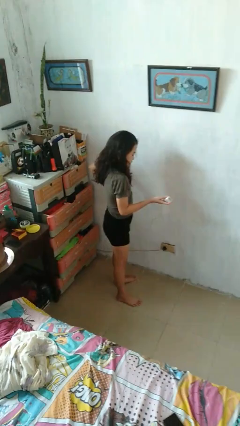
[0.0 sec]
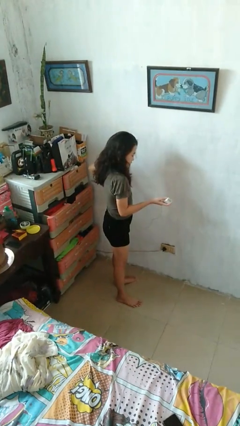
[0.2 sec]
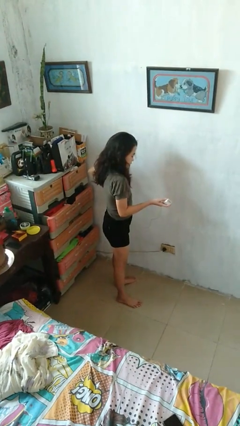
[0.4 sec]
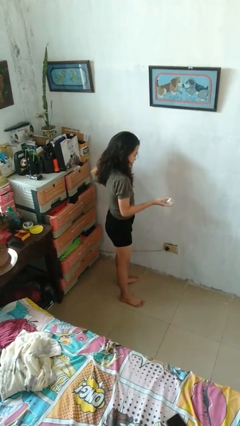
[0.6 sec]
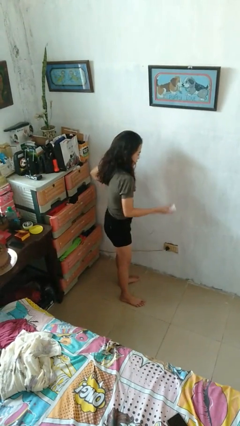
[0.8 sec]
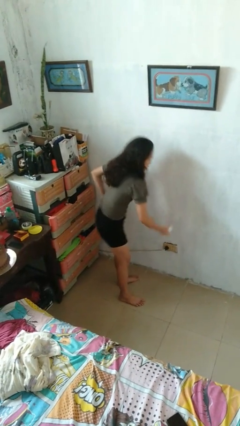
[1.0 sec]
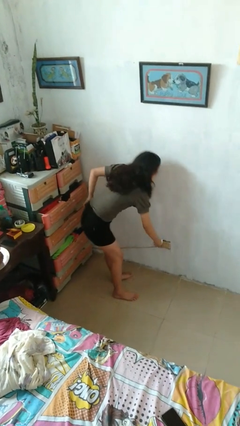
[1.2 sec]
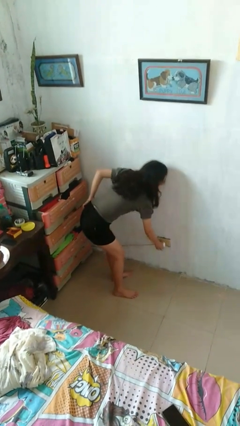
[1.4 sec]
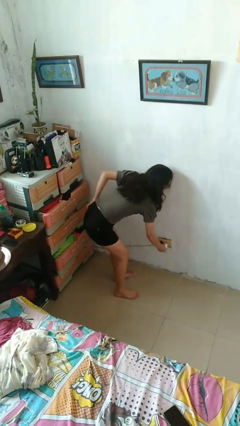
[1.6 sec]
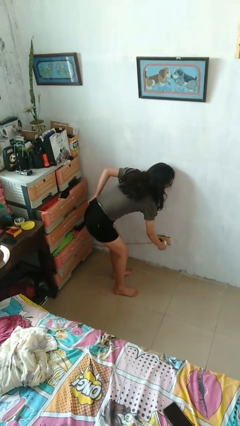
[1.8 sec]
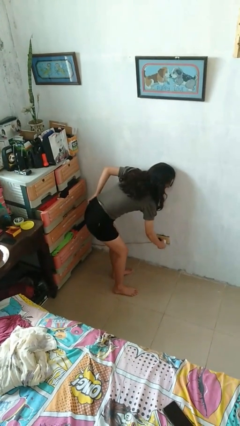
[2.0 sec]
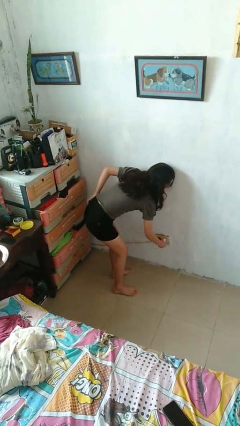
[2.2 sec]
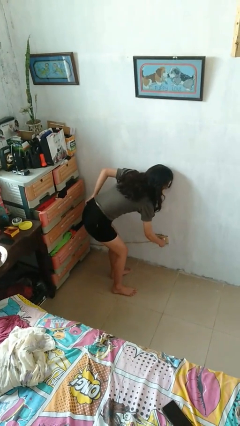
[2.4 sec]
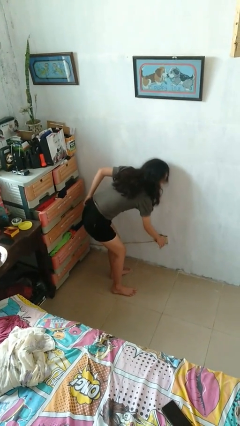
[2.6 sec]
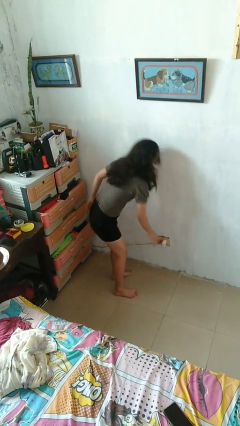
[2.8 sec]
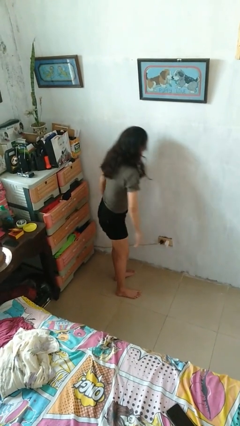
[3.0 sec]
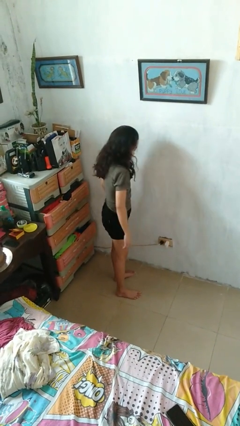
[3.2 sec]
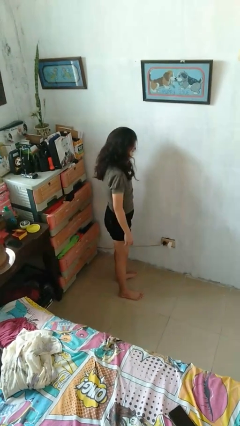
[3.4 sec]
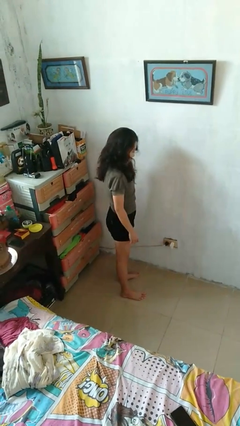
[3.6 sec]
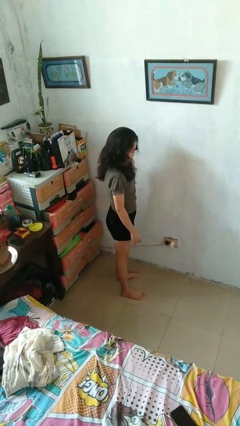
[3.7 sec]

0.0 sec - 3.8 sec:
person plugs into electrical socket

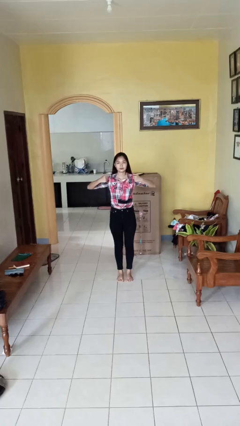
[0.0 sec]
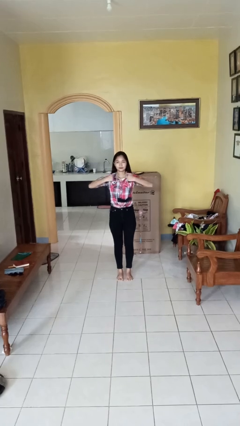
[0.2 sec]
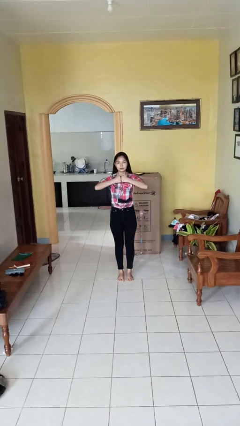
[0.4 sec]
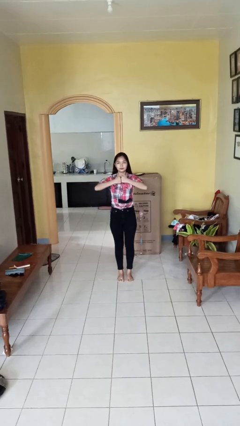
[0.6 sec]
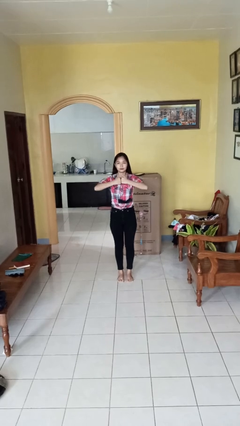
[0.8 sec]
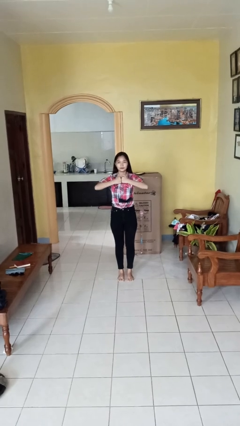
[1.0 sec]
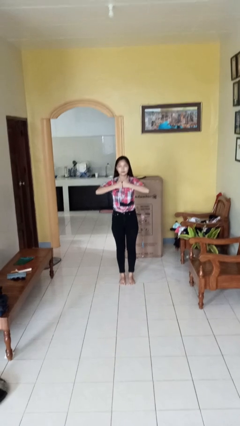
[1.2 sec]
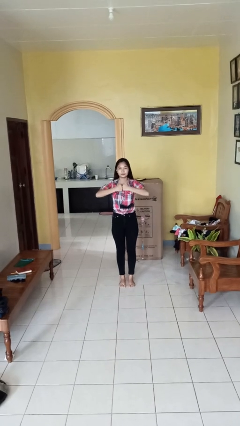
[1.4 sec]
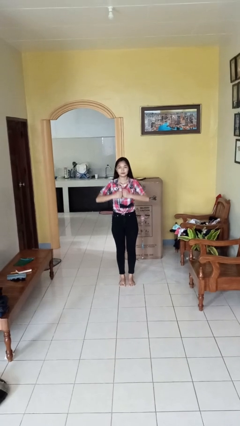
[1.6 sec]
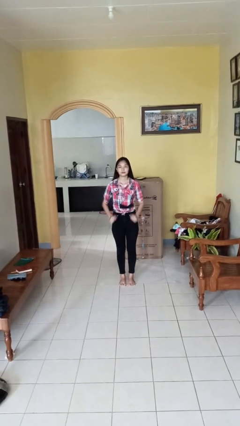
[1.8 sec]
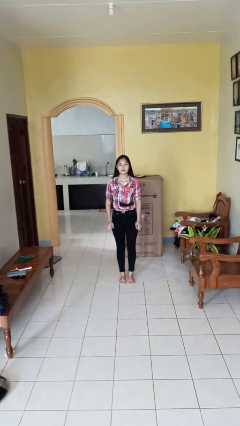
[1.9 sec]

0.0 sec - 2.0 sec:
person gestures zoom out

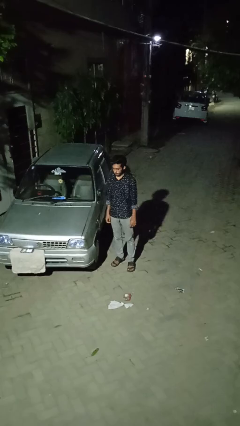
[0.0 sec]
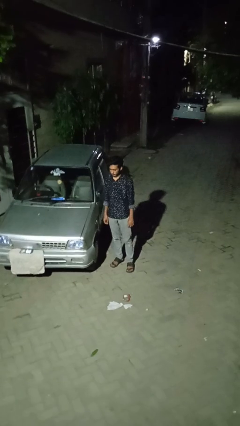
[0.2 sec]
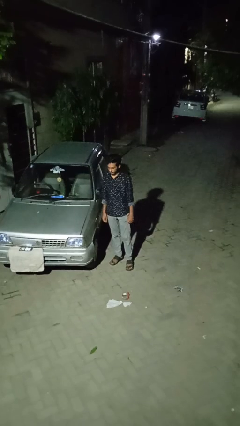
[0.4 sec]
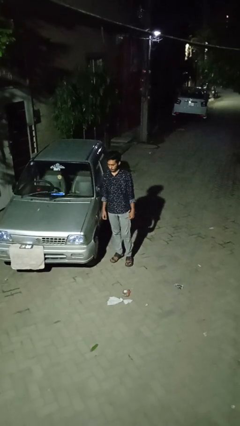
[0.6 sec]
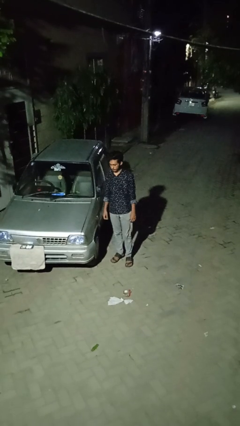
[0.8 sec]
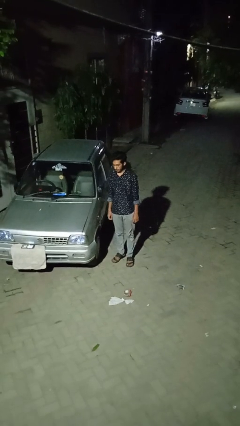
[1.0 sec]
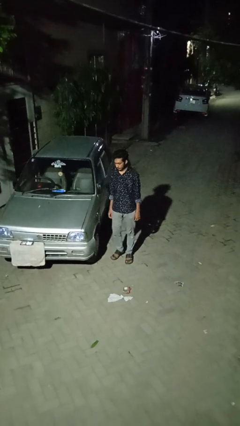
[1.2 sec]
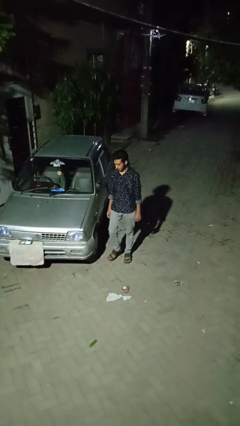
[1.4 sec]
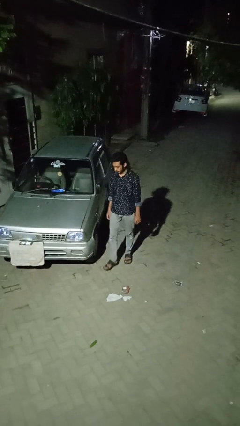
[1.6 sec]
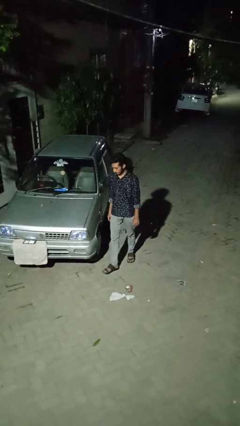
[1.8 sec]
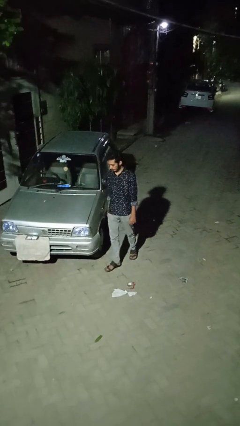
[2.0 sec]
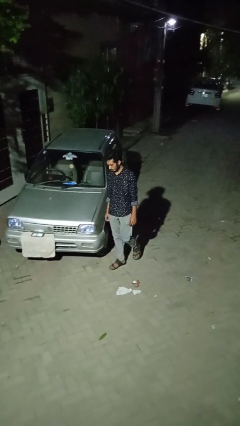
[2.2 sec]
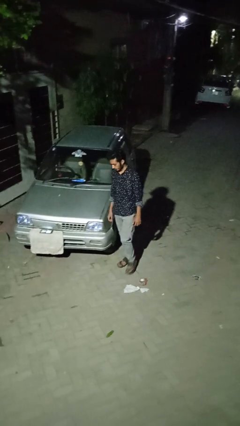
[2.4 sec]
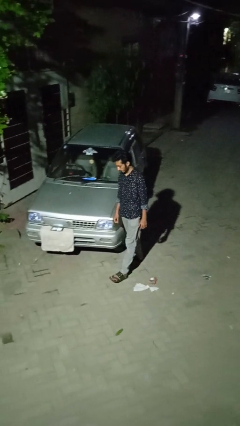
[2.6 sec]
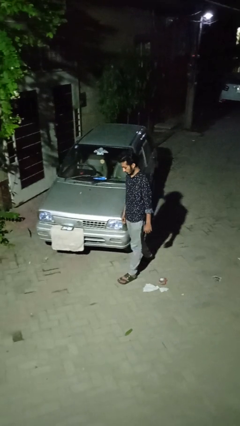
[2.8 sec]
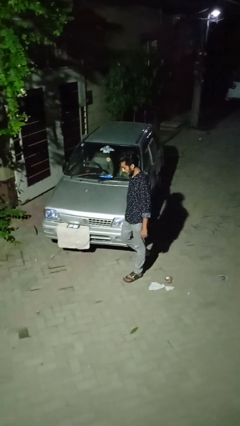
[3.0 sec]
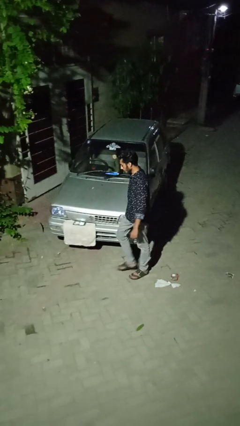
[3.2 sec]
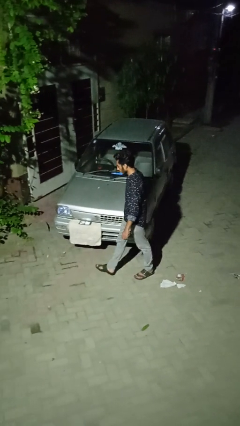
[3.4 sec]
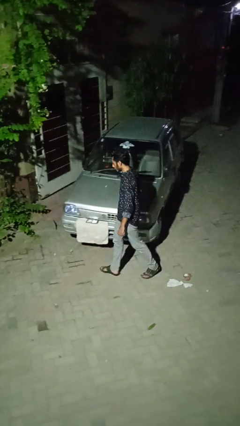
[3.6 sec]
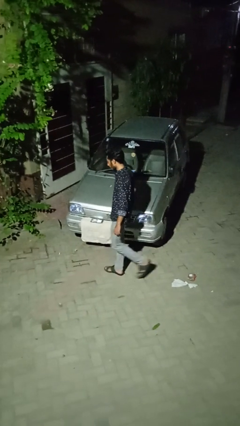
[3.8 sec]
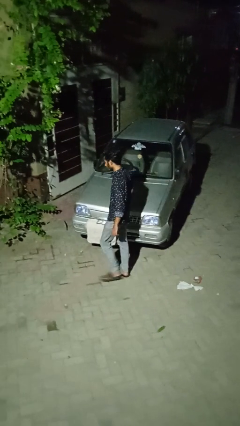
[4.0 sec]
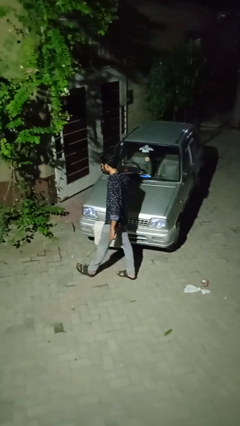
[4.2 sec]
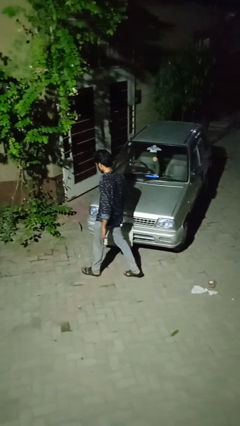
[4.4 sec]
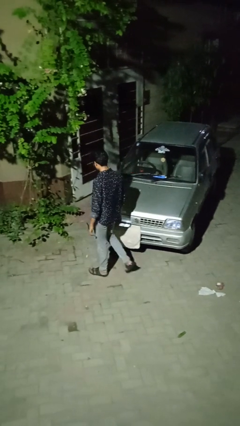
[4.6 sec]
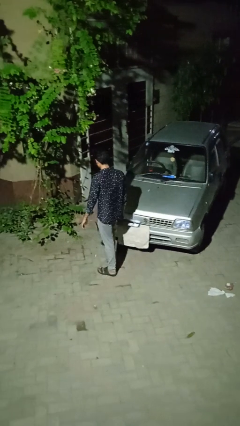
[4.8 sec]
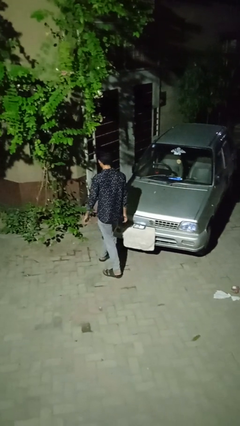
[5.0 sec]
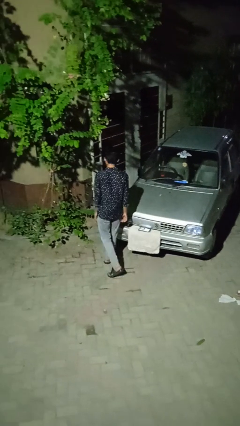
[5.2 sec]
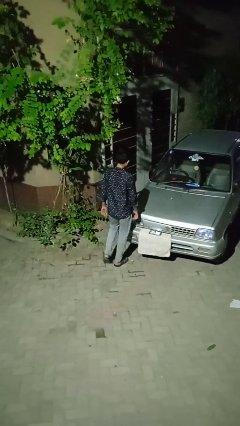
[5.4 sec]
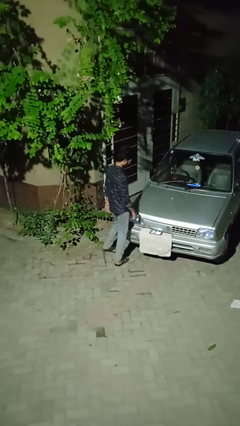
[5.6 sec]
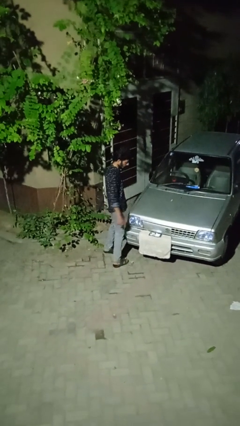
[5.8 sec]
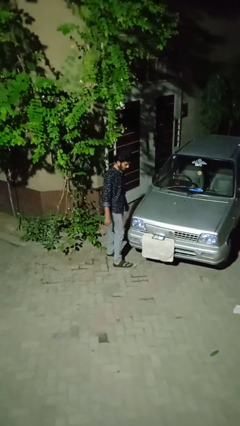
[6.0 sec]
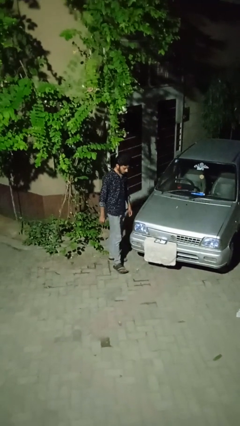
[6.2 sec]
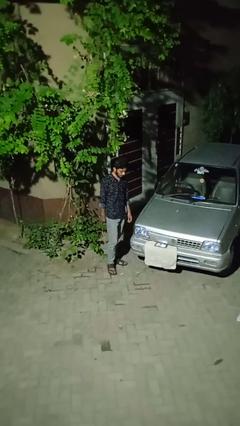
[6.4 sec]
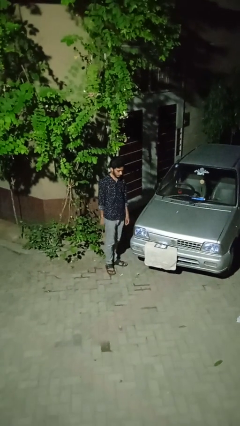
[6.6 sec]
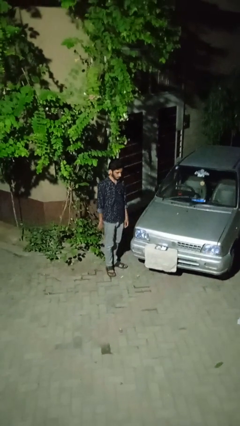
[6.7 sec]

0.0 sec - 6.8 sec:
person walks around car

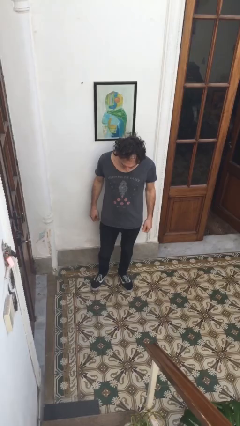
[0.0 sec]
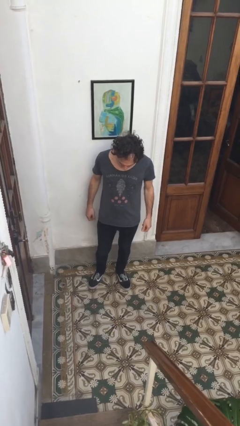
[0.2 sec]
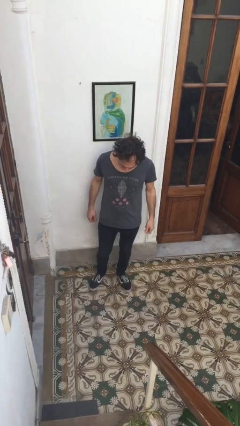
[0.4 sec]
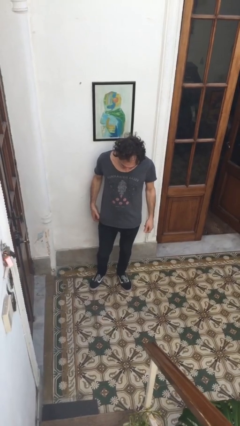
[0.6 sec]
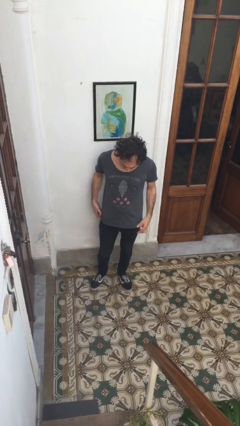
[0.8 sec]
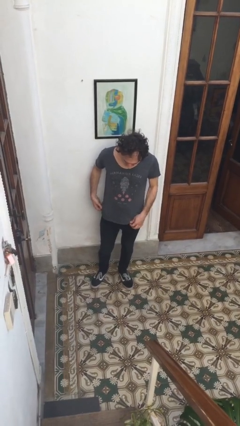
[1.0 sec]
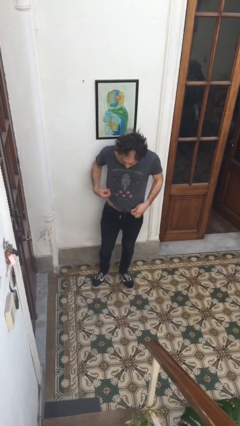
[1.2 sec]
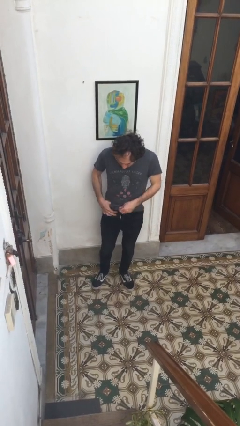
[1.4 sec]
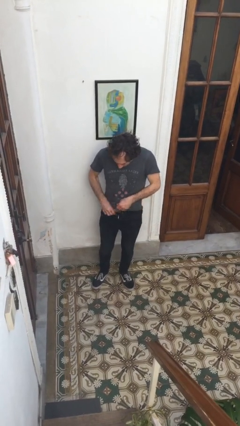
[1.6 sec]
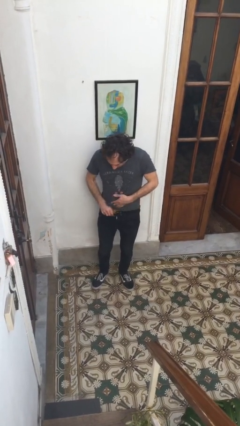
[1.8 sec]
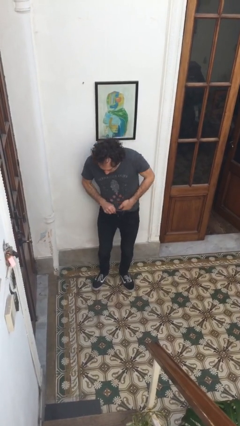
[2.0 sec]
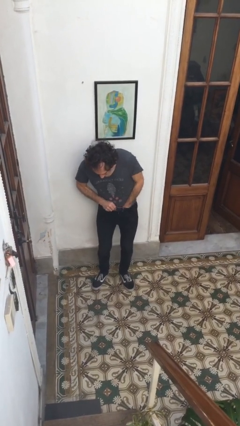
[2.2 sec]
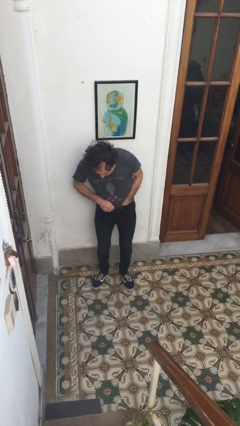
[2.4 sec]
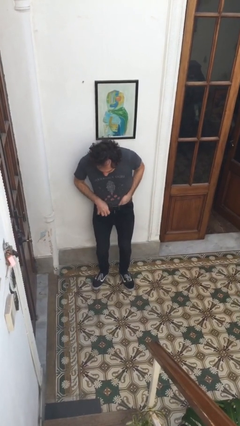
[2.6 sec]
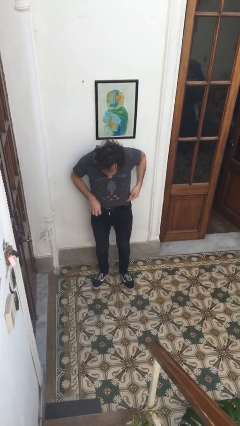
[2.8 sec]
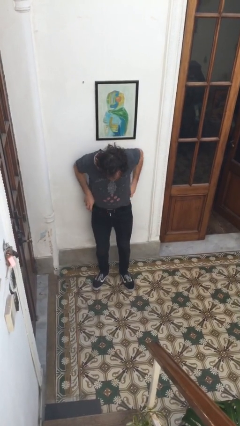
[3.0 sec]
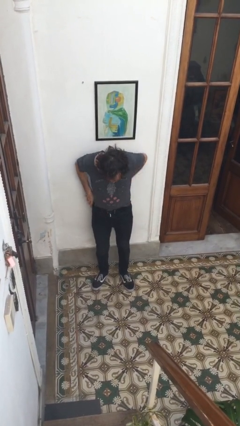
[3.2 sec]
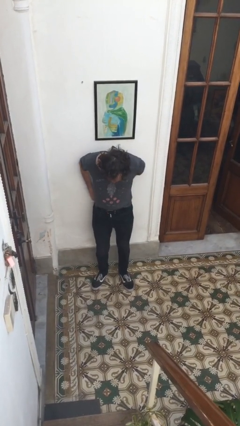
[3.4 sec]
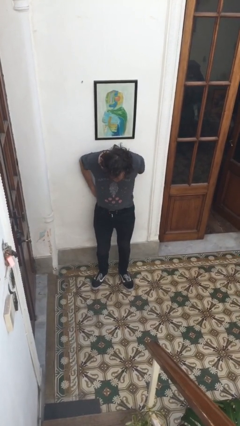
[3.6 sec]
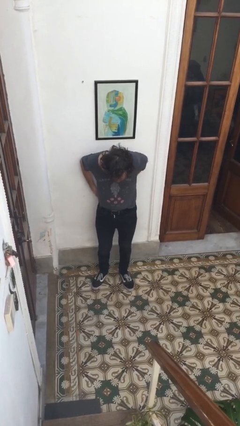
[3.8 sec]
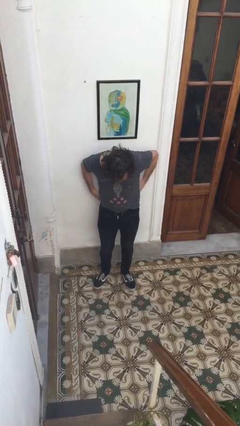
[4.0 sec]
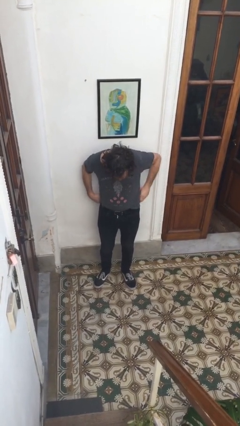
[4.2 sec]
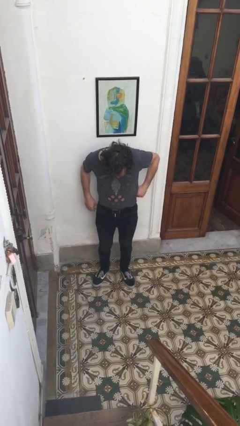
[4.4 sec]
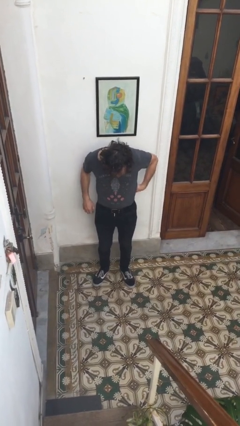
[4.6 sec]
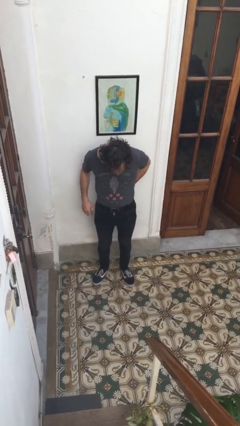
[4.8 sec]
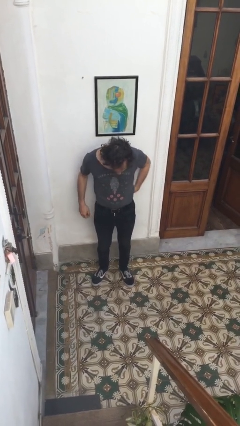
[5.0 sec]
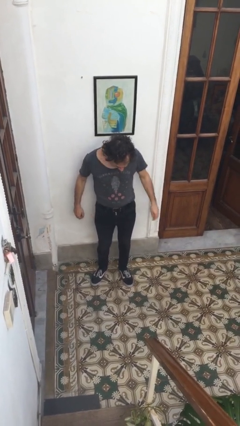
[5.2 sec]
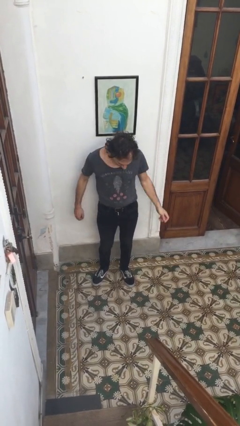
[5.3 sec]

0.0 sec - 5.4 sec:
person tucks in shirt
